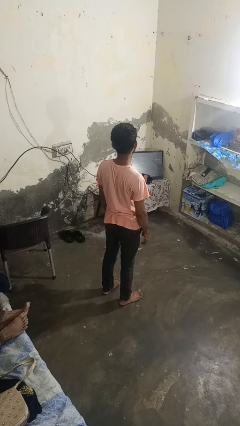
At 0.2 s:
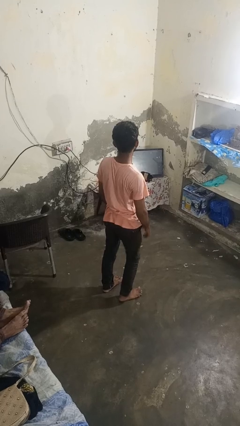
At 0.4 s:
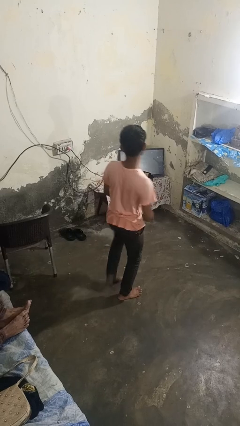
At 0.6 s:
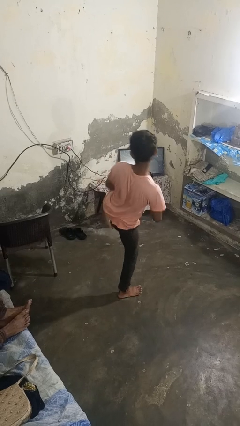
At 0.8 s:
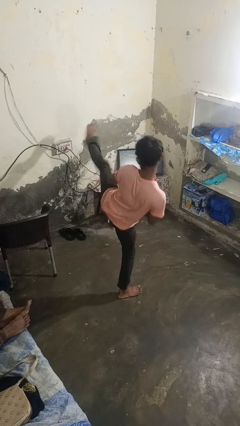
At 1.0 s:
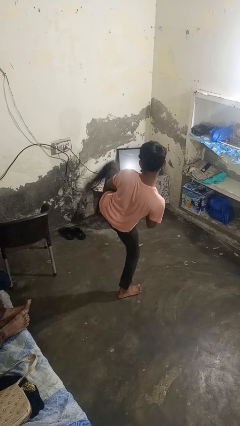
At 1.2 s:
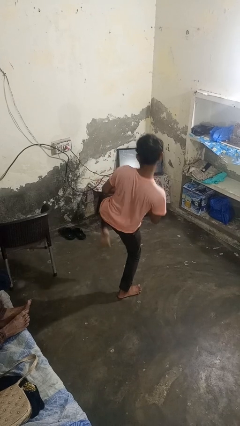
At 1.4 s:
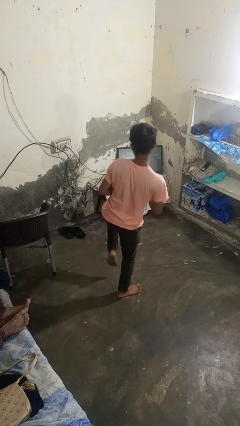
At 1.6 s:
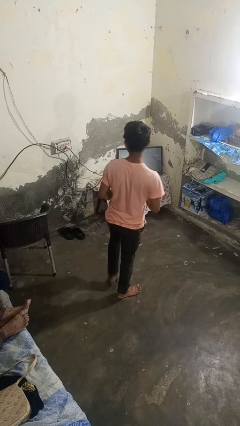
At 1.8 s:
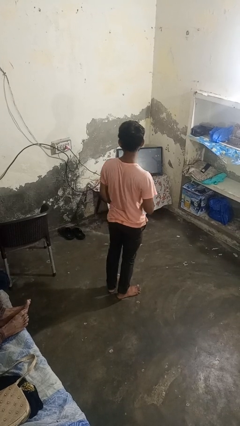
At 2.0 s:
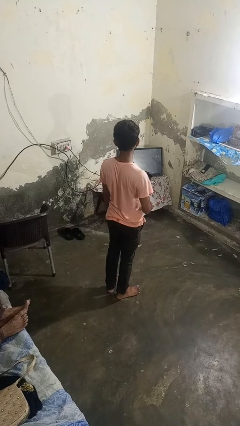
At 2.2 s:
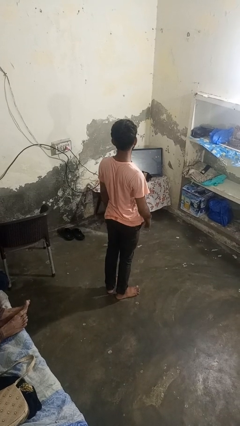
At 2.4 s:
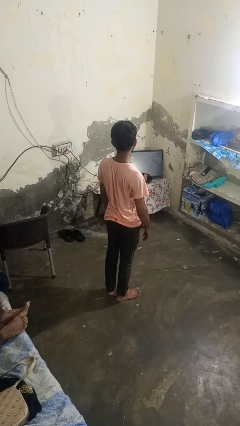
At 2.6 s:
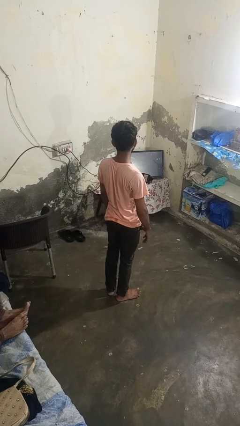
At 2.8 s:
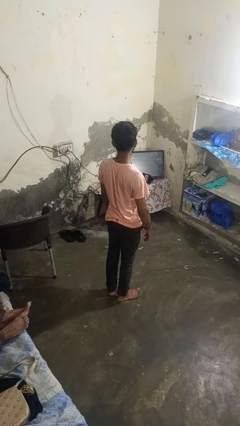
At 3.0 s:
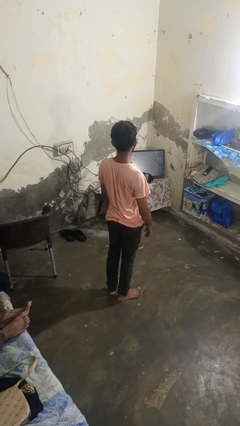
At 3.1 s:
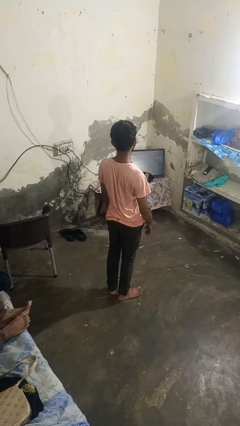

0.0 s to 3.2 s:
person karate kicks

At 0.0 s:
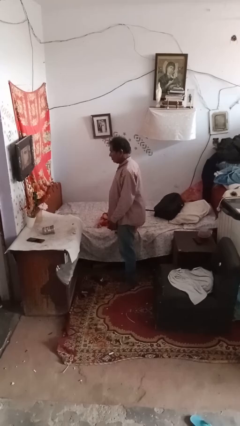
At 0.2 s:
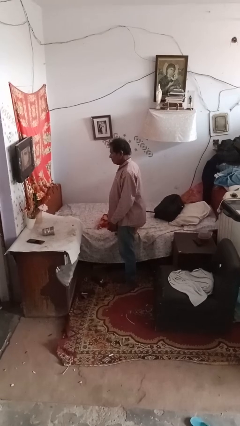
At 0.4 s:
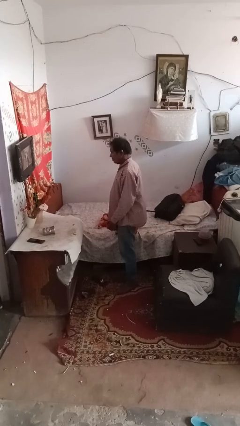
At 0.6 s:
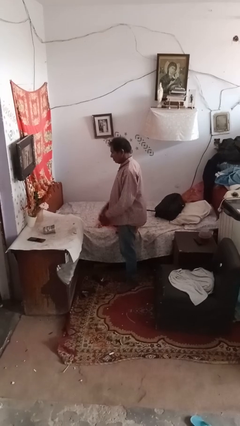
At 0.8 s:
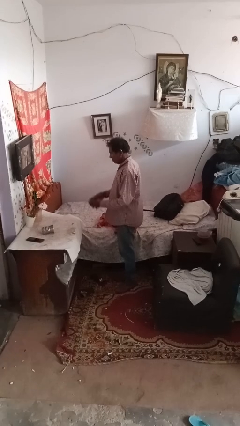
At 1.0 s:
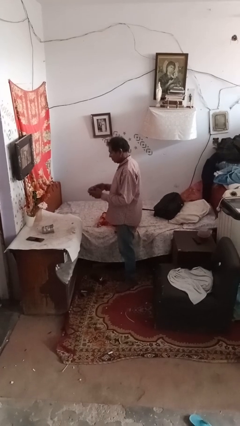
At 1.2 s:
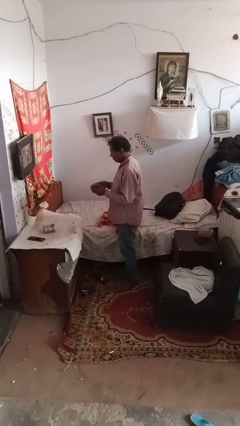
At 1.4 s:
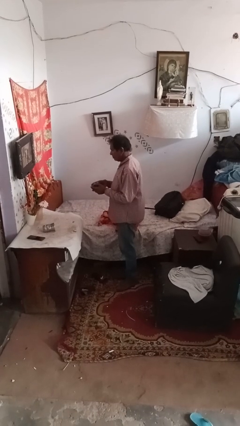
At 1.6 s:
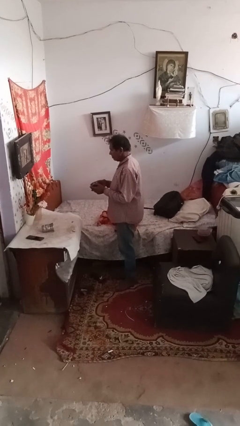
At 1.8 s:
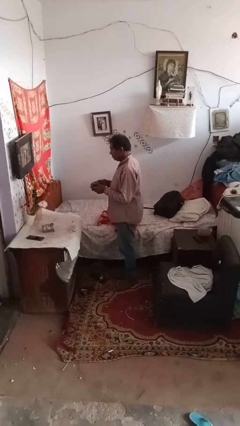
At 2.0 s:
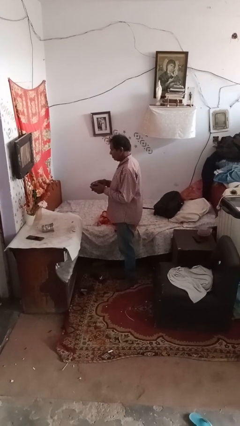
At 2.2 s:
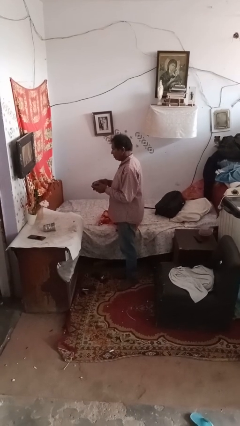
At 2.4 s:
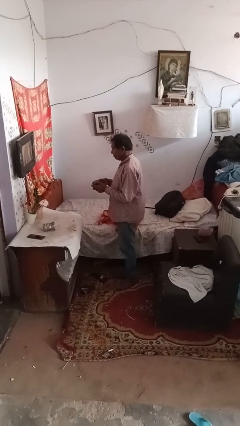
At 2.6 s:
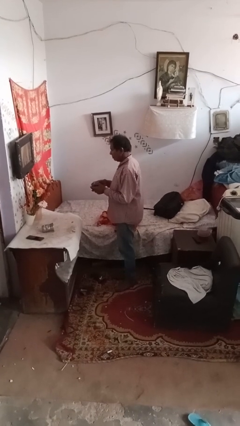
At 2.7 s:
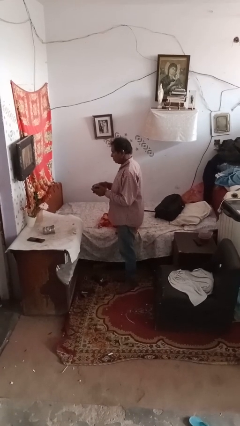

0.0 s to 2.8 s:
person interacts with handheld game

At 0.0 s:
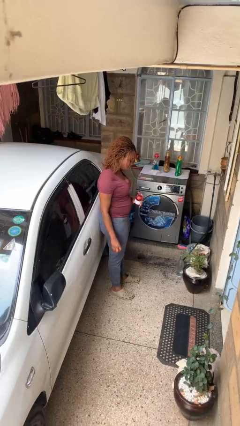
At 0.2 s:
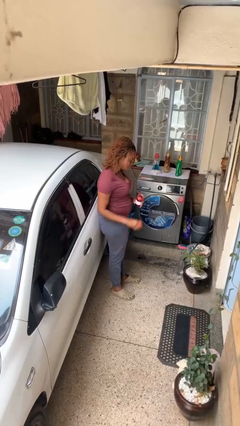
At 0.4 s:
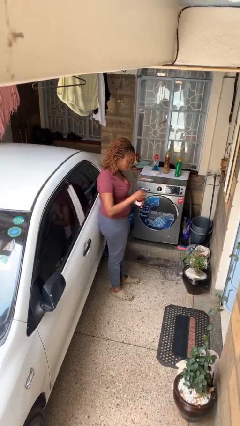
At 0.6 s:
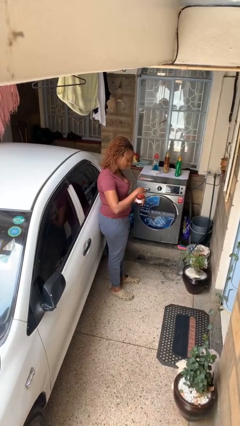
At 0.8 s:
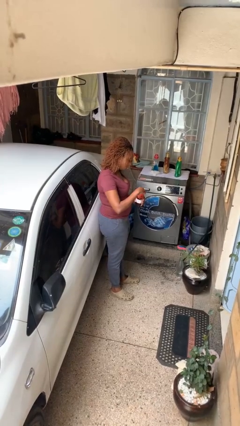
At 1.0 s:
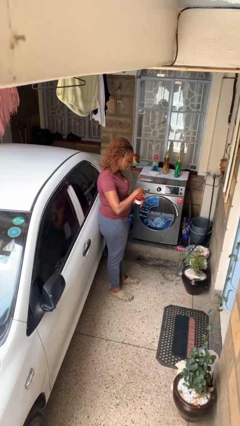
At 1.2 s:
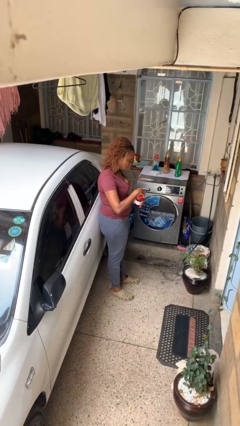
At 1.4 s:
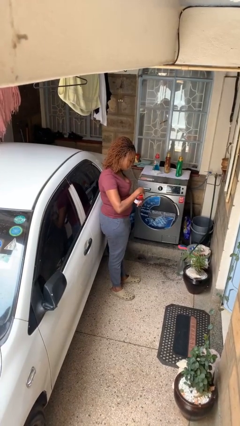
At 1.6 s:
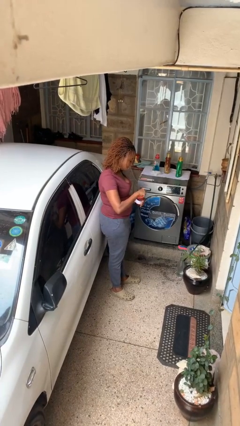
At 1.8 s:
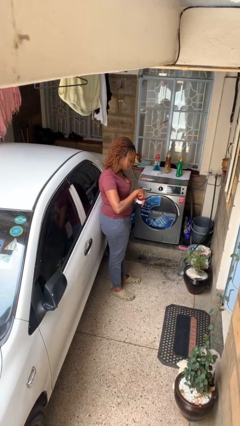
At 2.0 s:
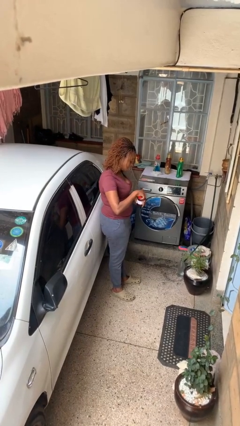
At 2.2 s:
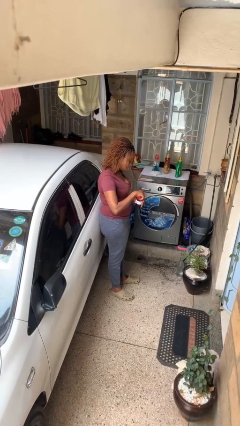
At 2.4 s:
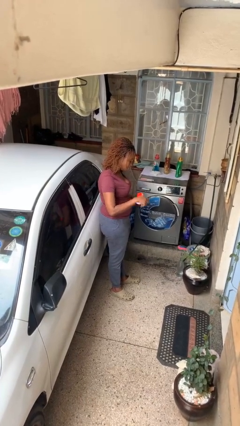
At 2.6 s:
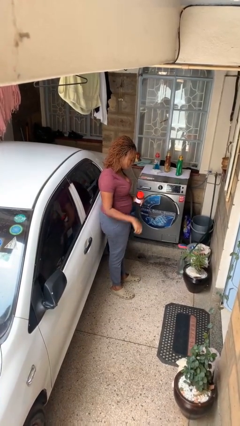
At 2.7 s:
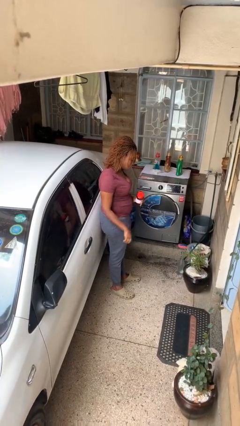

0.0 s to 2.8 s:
person closes jar

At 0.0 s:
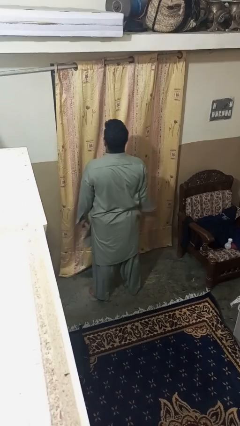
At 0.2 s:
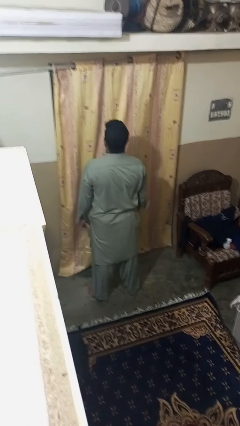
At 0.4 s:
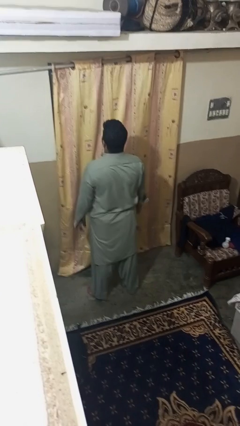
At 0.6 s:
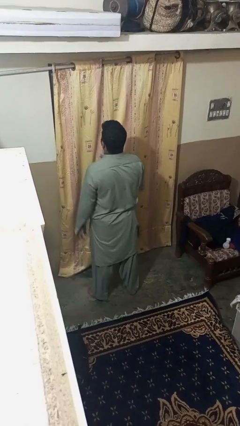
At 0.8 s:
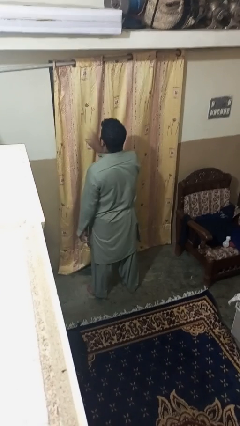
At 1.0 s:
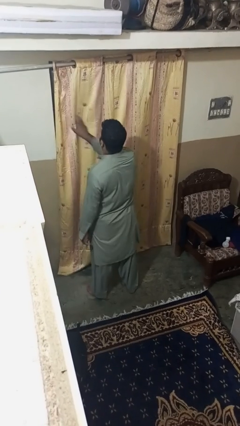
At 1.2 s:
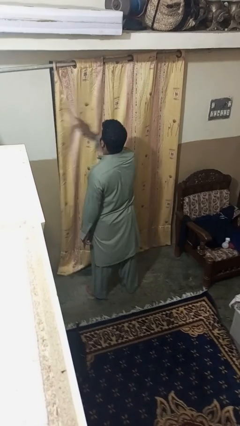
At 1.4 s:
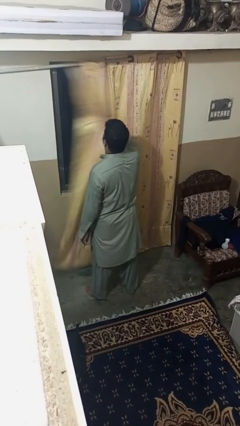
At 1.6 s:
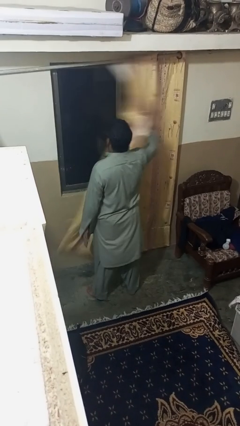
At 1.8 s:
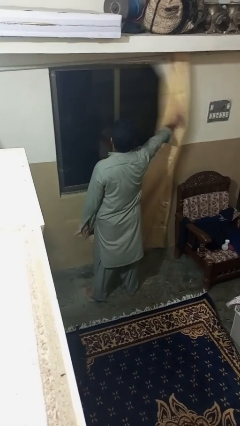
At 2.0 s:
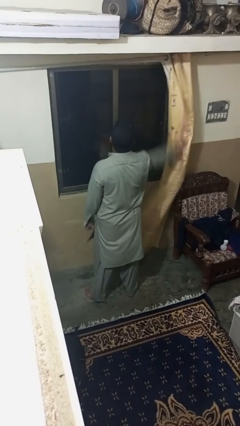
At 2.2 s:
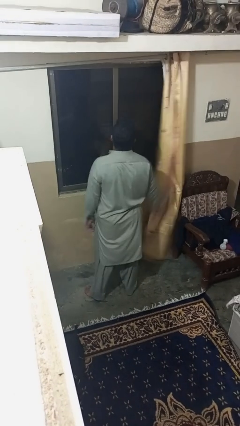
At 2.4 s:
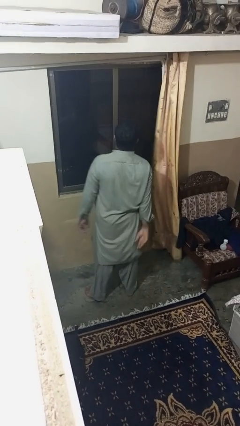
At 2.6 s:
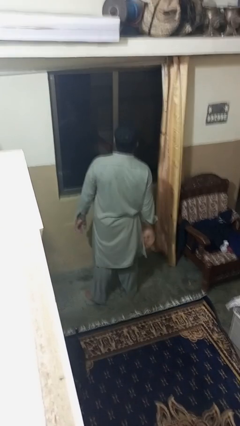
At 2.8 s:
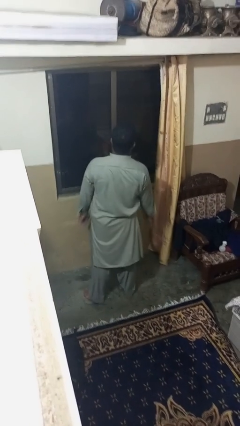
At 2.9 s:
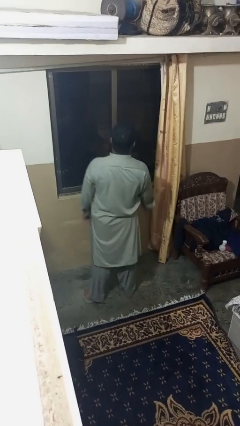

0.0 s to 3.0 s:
person opens curtains

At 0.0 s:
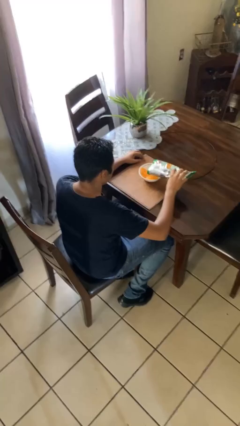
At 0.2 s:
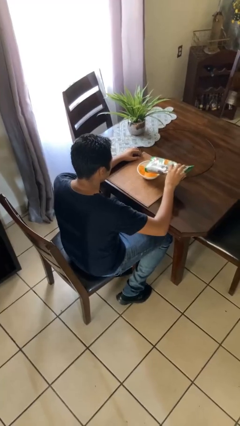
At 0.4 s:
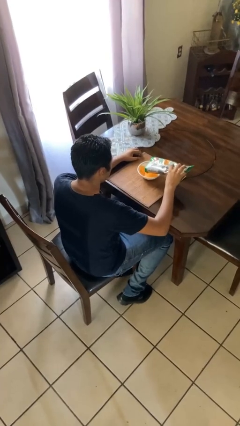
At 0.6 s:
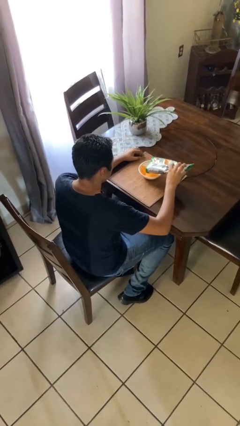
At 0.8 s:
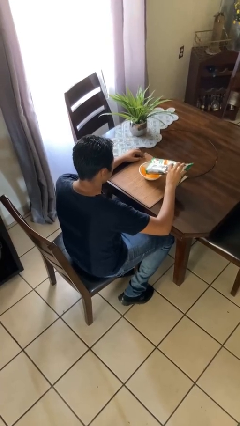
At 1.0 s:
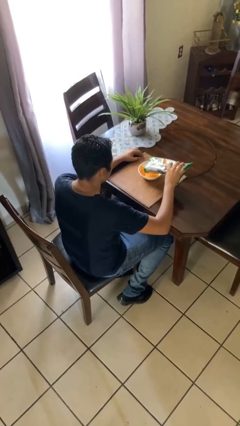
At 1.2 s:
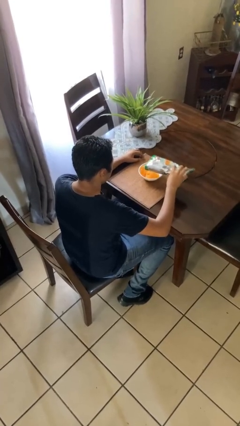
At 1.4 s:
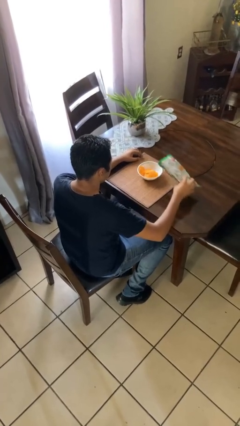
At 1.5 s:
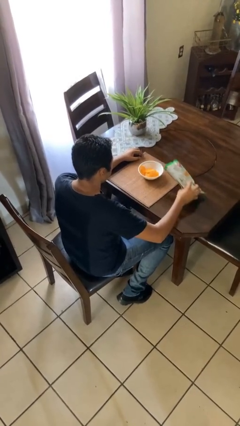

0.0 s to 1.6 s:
person pours into bowl

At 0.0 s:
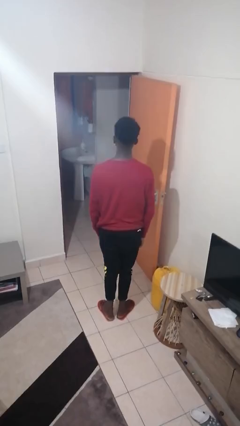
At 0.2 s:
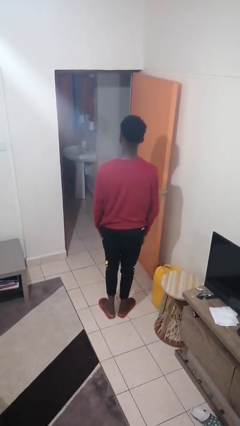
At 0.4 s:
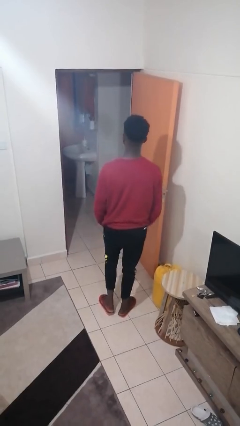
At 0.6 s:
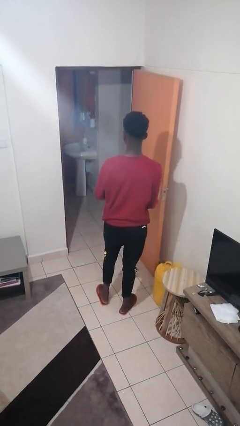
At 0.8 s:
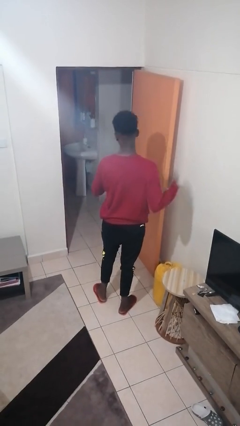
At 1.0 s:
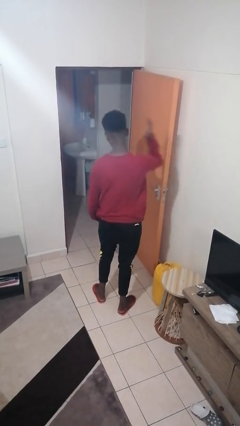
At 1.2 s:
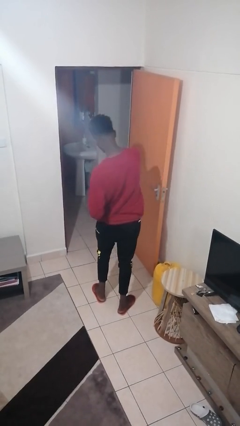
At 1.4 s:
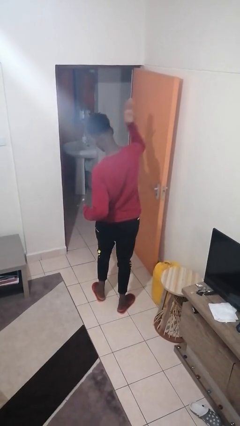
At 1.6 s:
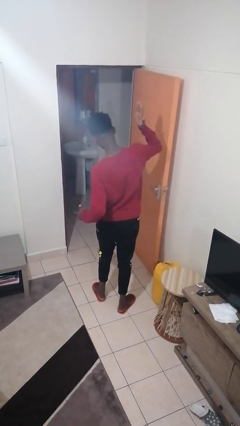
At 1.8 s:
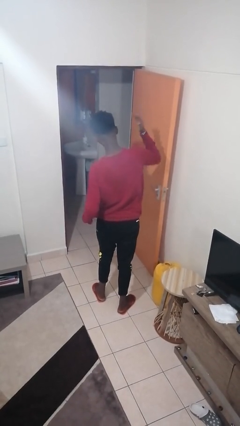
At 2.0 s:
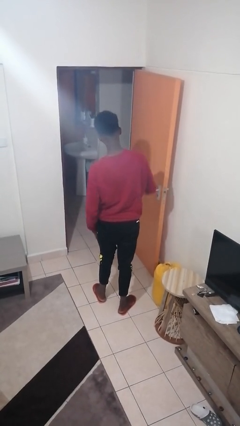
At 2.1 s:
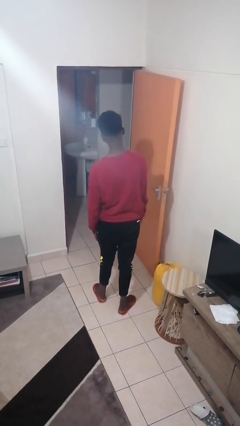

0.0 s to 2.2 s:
person karate chop

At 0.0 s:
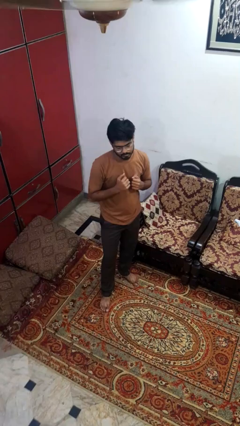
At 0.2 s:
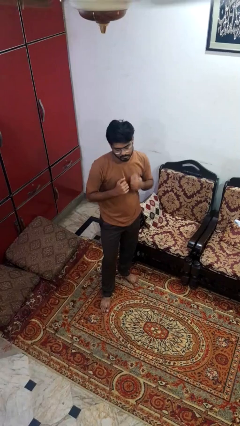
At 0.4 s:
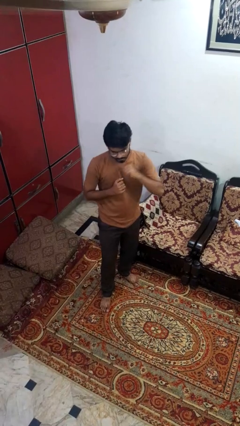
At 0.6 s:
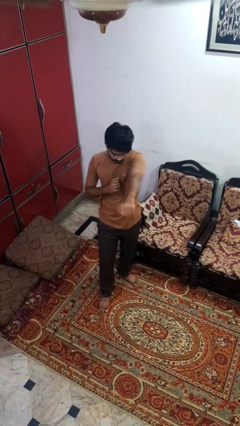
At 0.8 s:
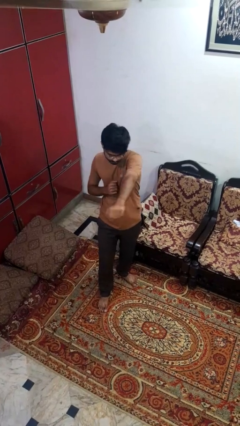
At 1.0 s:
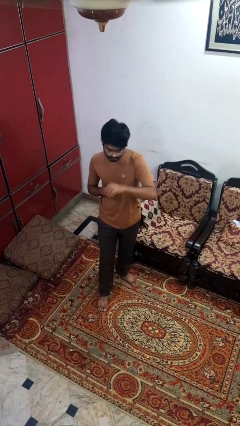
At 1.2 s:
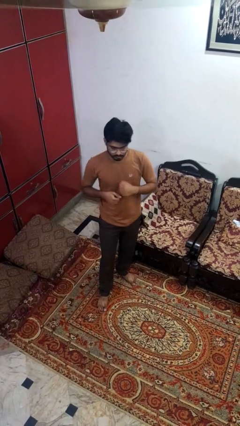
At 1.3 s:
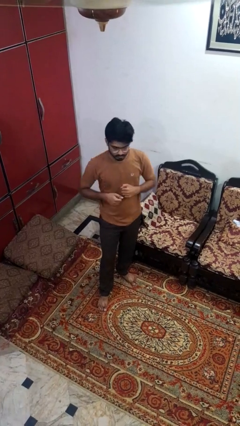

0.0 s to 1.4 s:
person punches
